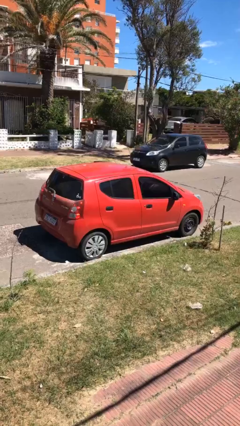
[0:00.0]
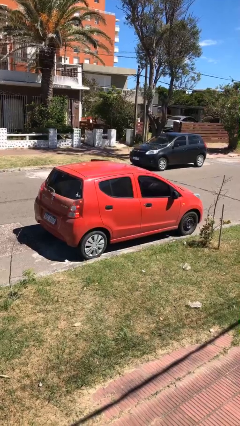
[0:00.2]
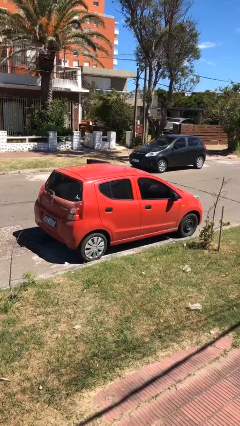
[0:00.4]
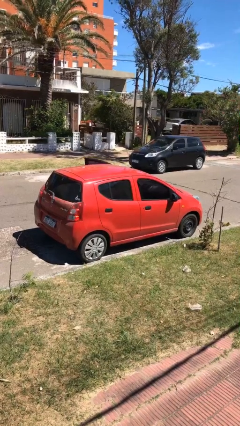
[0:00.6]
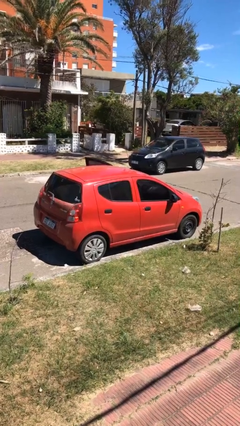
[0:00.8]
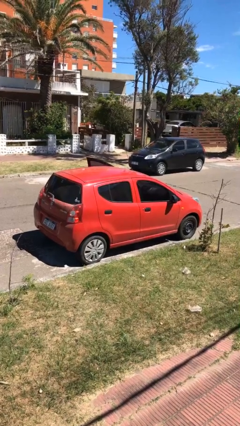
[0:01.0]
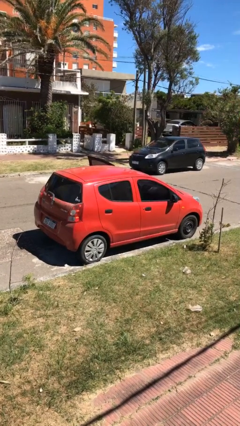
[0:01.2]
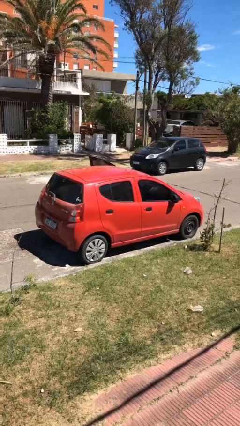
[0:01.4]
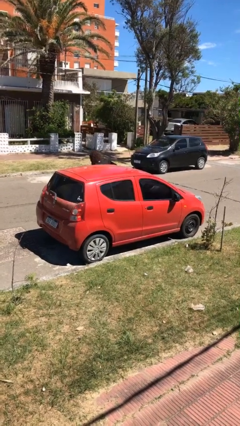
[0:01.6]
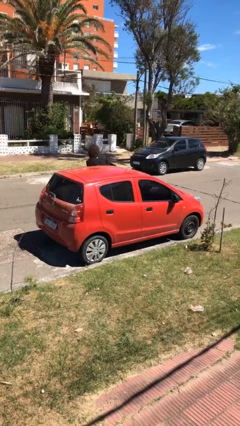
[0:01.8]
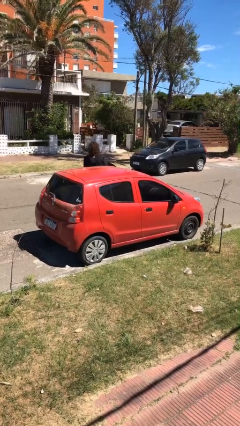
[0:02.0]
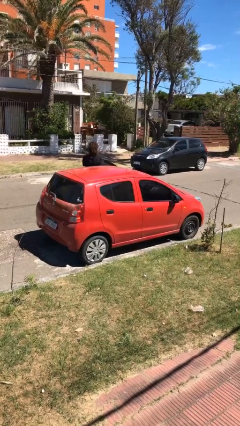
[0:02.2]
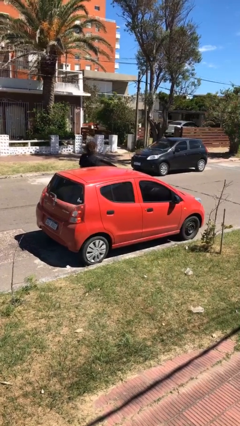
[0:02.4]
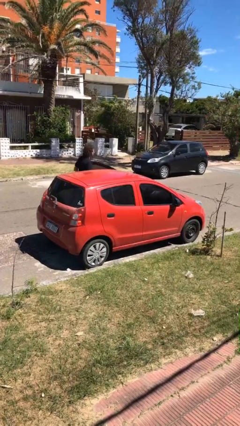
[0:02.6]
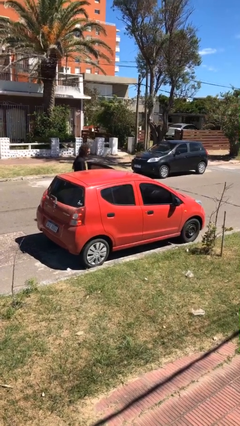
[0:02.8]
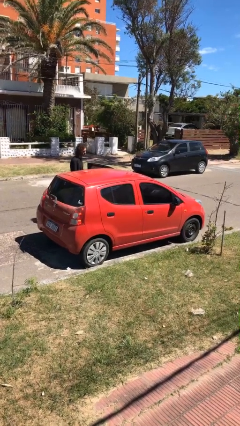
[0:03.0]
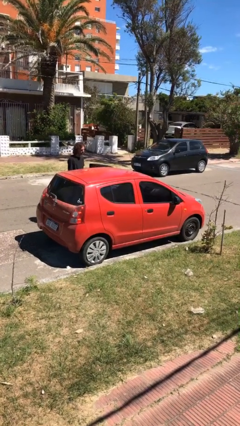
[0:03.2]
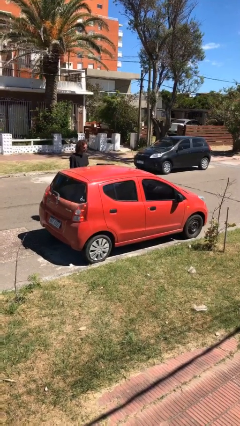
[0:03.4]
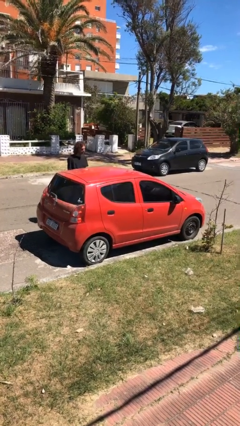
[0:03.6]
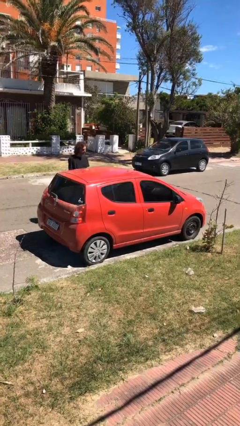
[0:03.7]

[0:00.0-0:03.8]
car drops off person

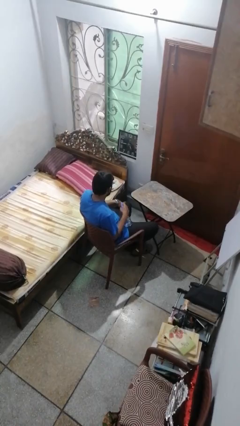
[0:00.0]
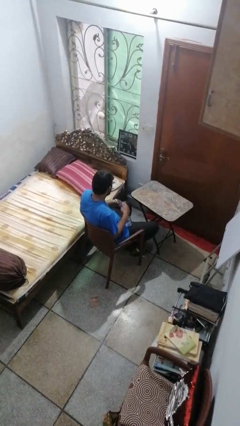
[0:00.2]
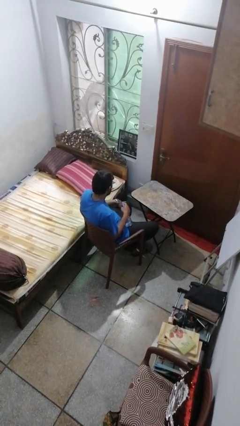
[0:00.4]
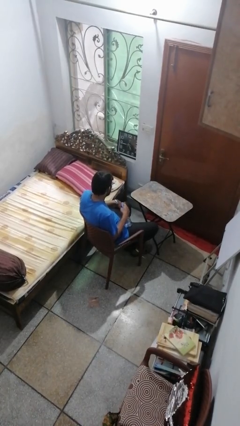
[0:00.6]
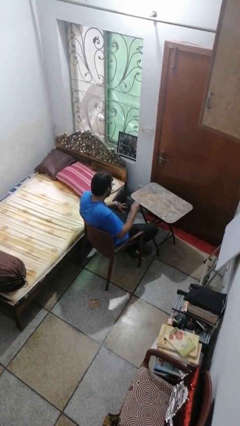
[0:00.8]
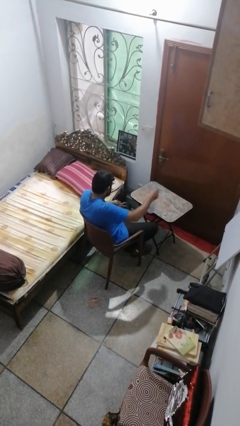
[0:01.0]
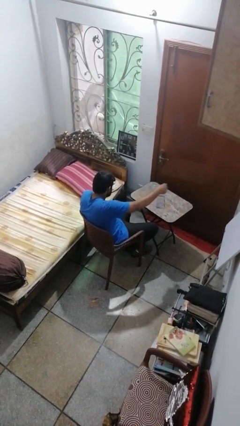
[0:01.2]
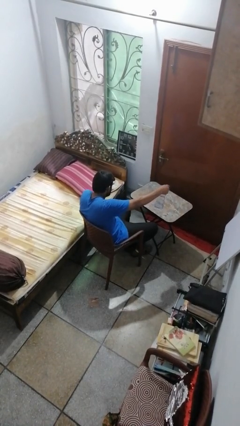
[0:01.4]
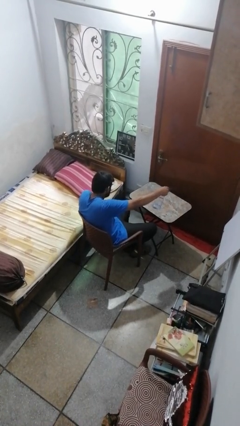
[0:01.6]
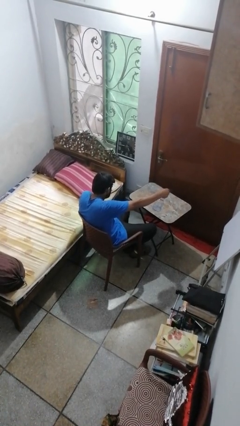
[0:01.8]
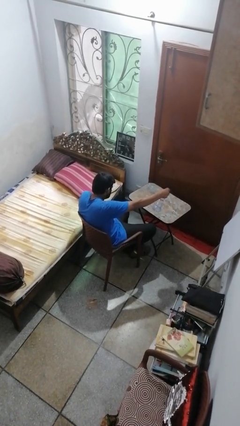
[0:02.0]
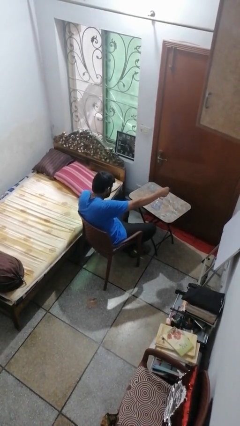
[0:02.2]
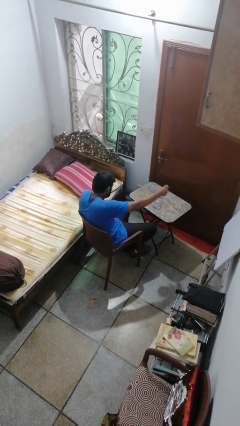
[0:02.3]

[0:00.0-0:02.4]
person sprays from bottle

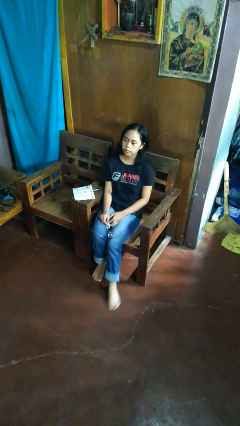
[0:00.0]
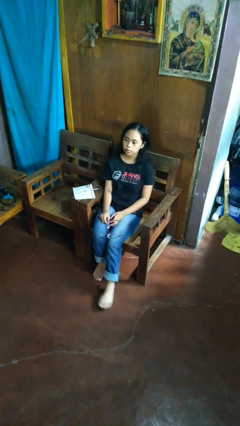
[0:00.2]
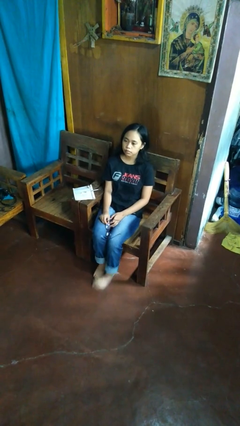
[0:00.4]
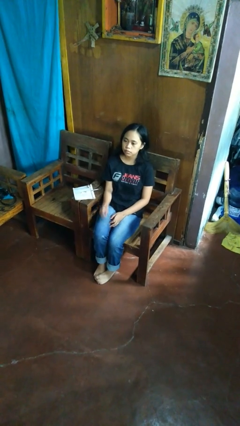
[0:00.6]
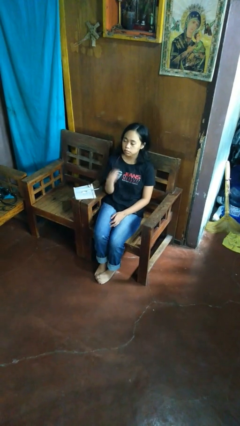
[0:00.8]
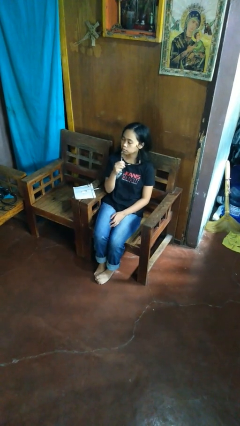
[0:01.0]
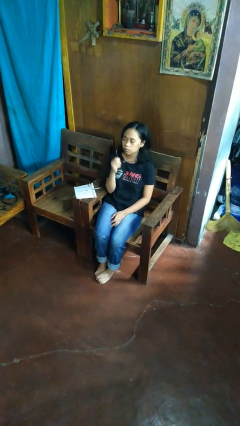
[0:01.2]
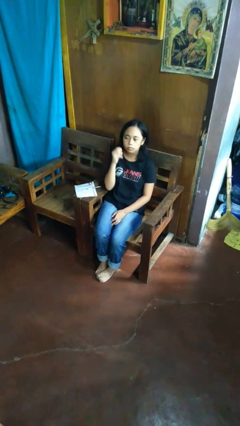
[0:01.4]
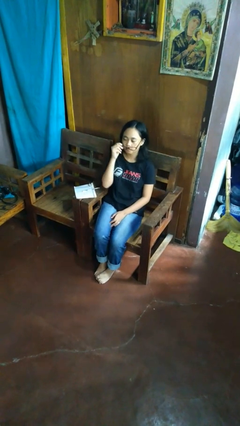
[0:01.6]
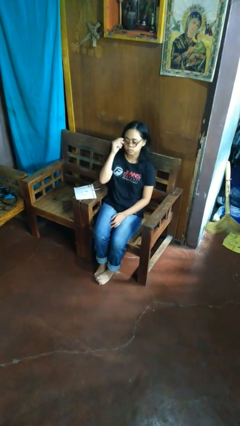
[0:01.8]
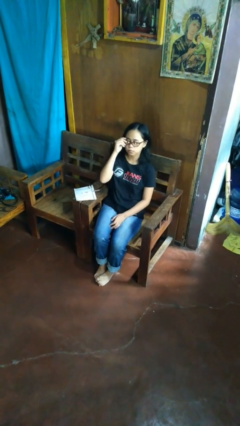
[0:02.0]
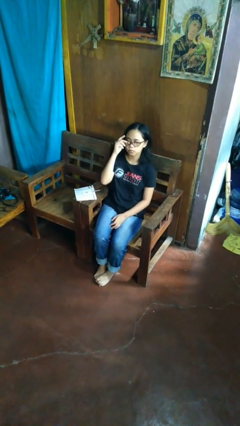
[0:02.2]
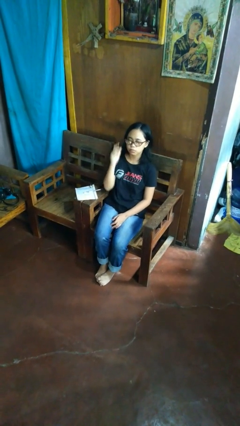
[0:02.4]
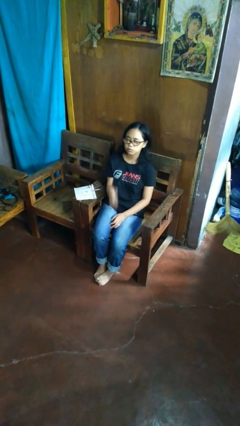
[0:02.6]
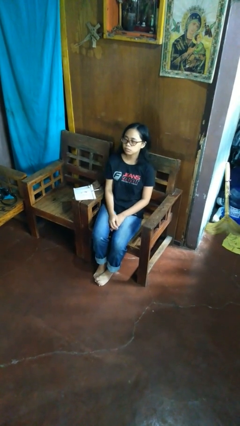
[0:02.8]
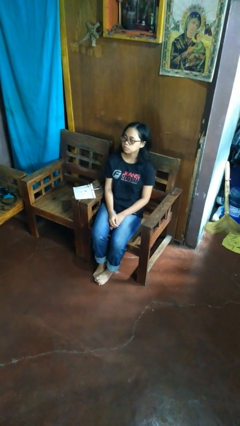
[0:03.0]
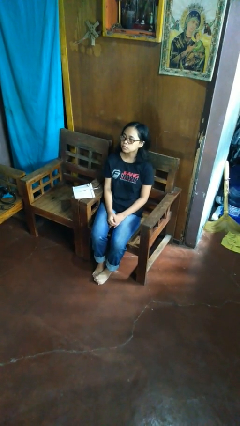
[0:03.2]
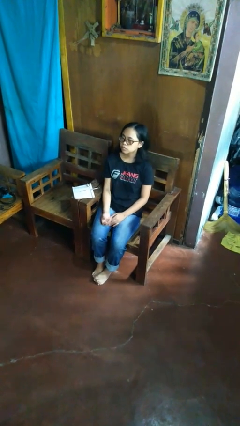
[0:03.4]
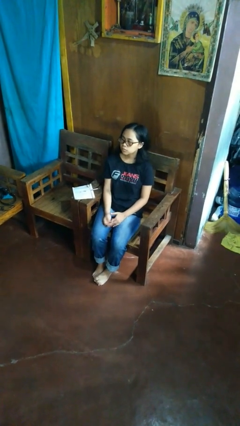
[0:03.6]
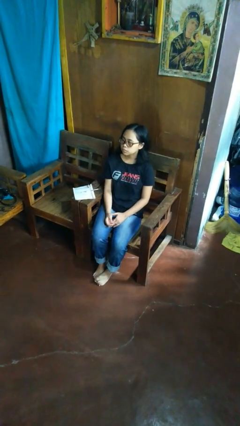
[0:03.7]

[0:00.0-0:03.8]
person puts on glasses

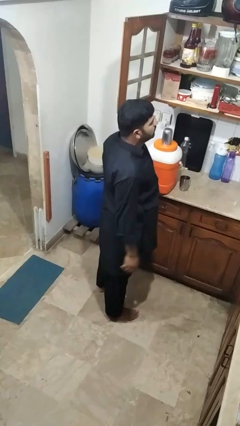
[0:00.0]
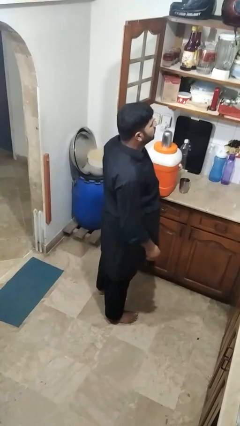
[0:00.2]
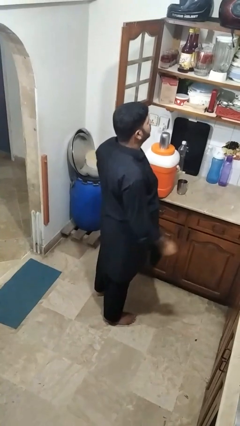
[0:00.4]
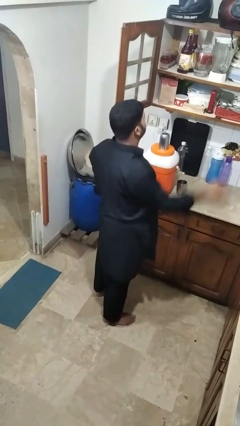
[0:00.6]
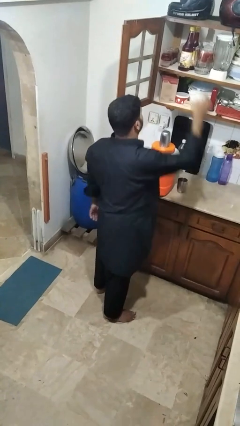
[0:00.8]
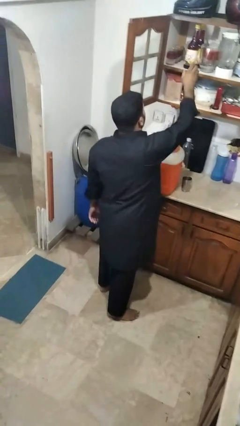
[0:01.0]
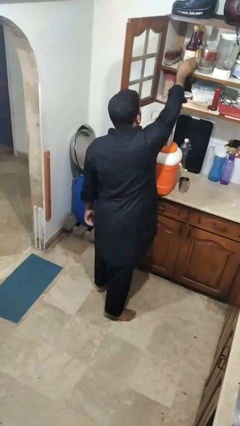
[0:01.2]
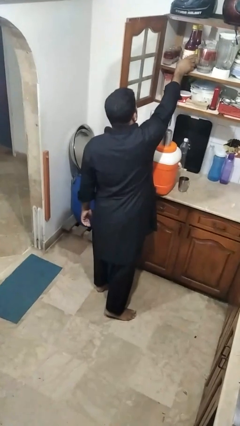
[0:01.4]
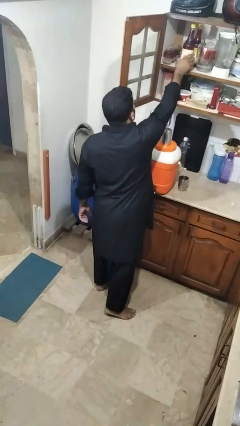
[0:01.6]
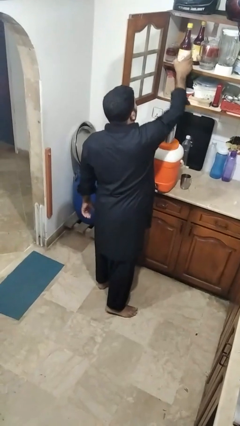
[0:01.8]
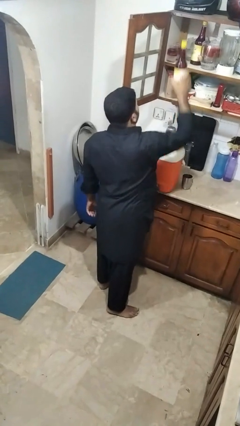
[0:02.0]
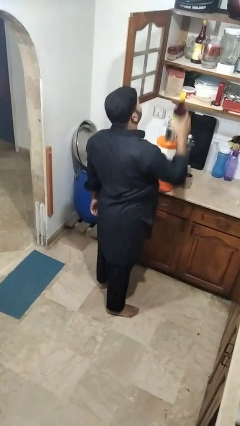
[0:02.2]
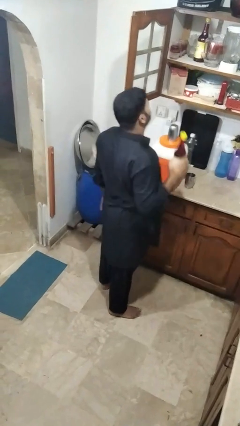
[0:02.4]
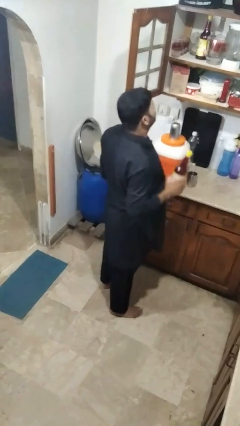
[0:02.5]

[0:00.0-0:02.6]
person picks up object from cabinet

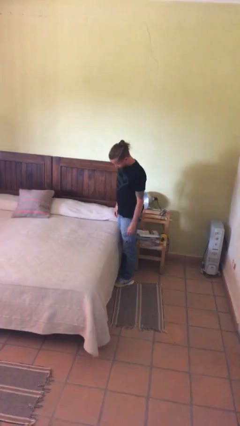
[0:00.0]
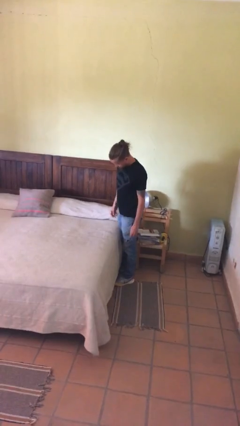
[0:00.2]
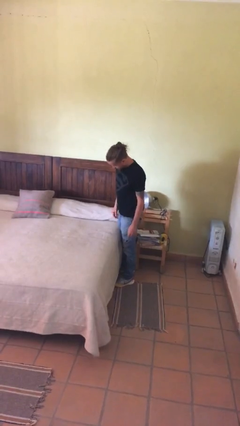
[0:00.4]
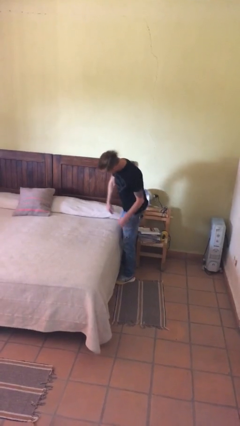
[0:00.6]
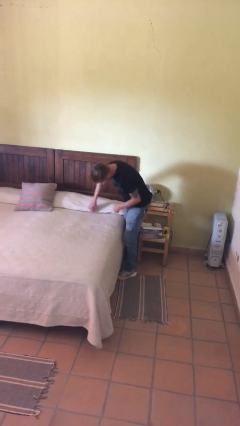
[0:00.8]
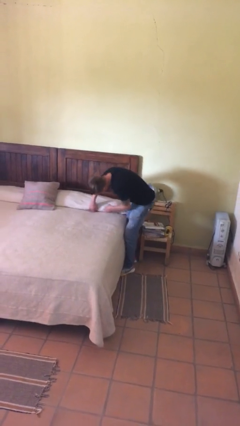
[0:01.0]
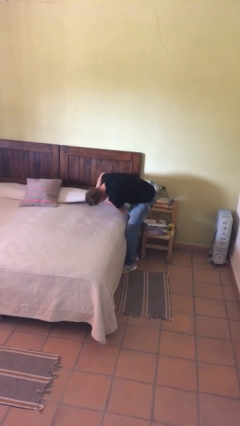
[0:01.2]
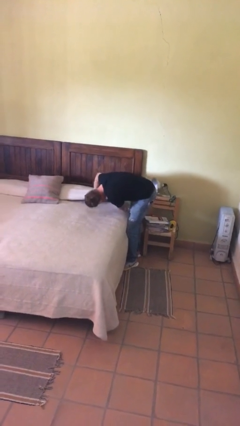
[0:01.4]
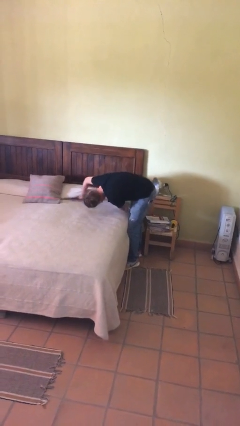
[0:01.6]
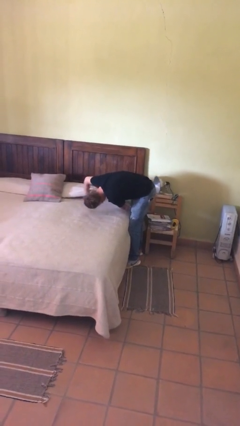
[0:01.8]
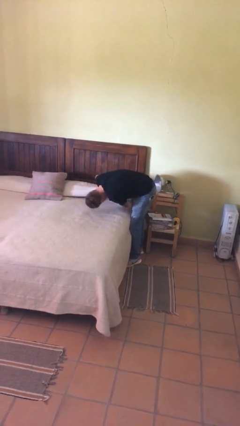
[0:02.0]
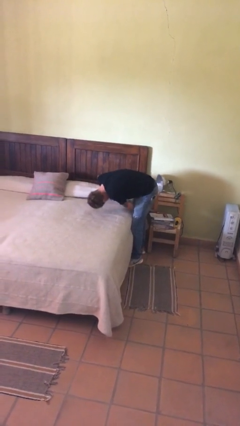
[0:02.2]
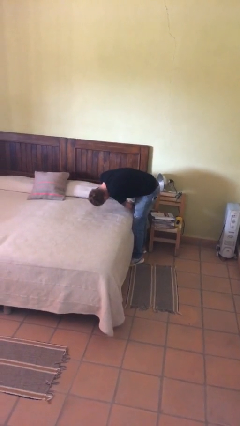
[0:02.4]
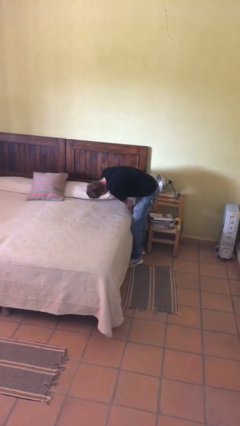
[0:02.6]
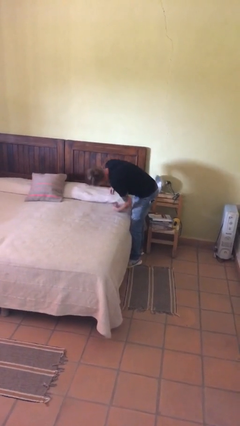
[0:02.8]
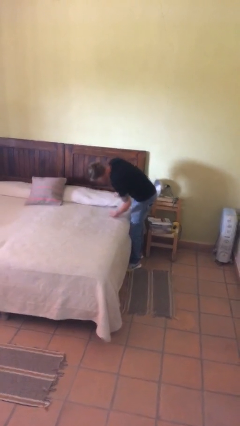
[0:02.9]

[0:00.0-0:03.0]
person searches in couch

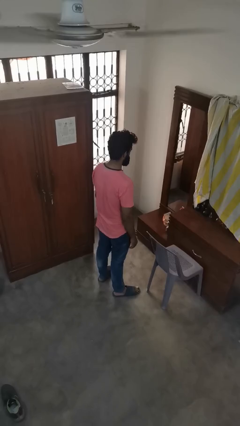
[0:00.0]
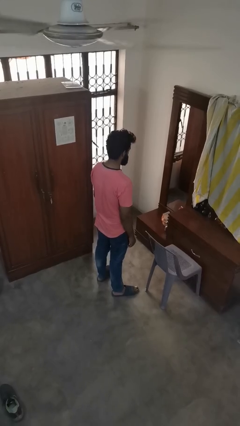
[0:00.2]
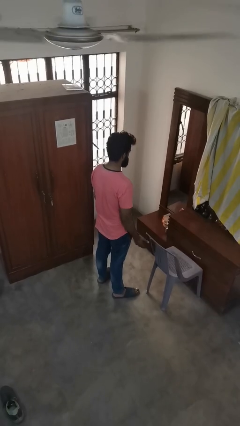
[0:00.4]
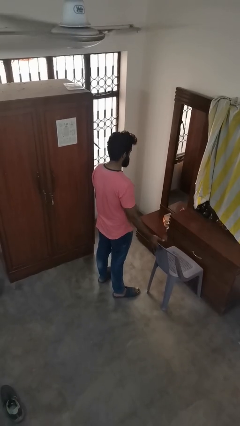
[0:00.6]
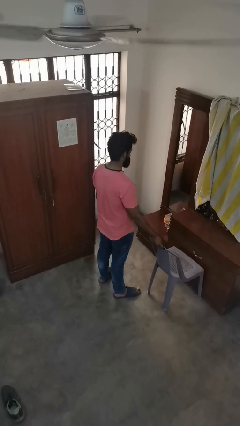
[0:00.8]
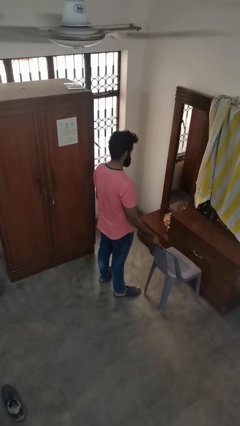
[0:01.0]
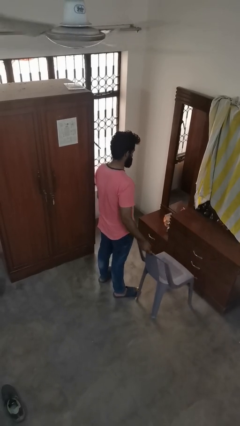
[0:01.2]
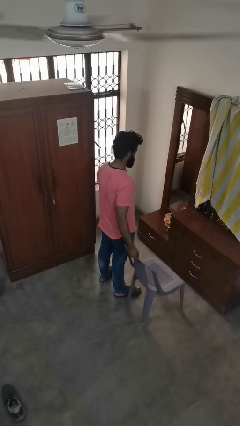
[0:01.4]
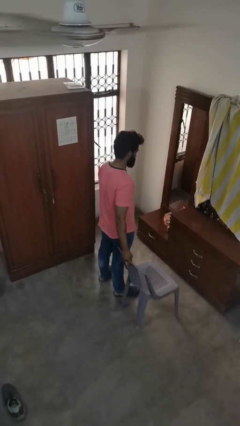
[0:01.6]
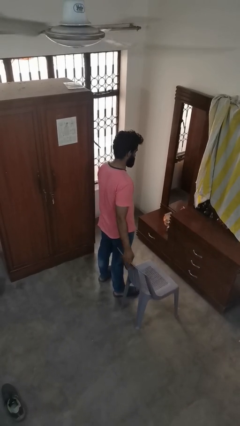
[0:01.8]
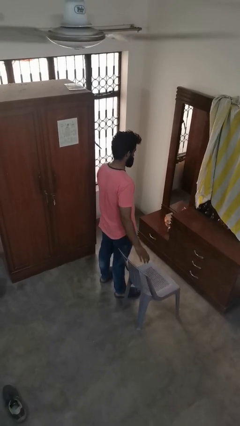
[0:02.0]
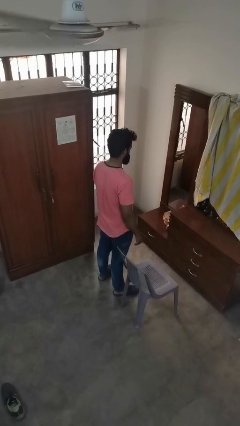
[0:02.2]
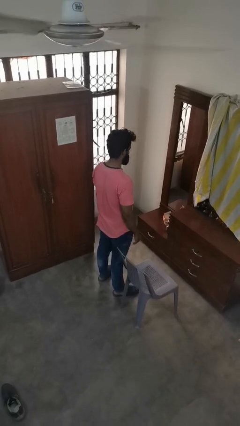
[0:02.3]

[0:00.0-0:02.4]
person pulls out chair
